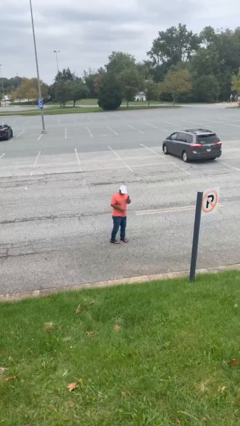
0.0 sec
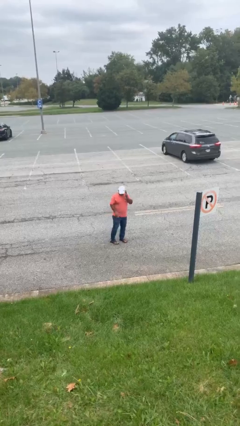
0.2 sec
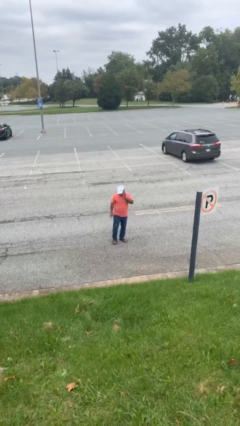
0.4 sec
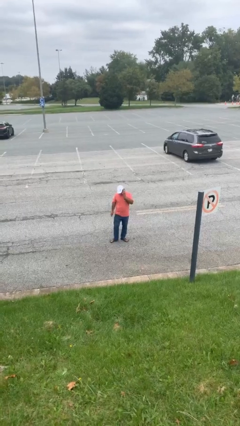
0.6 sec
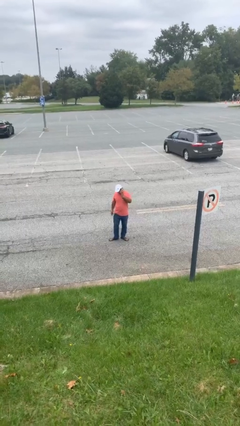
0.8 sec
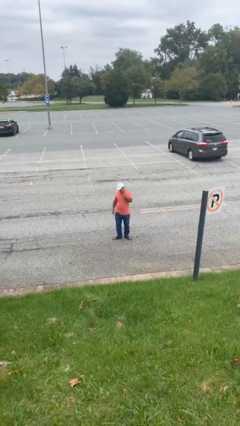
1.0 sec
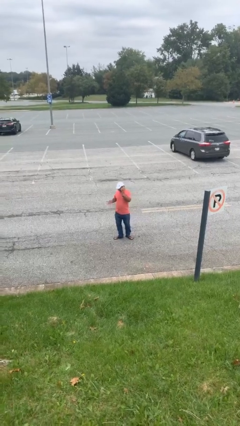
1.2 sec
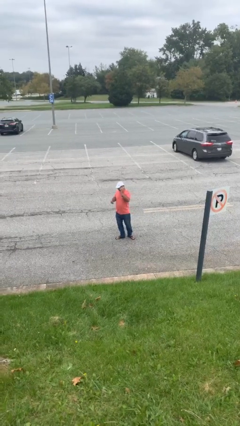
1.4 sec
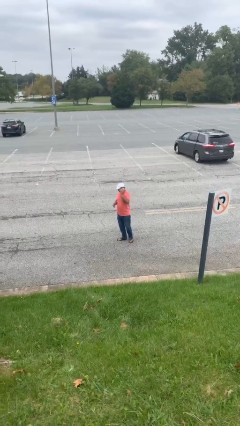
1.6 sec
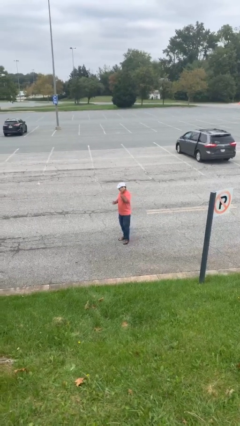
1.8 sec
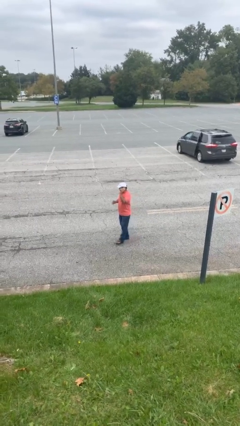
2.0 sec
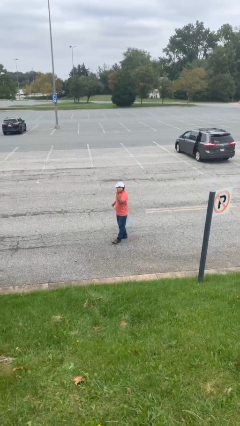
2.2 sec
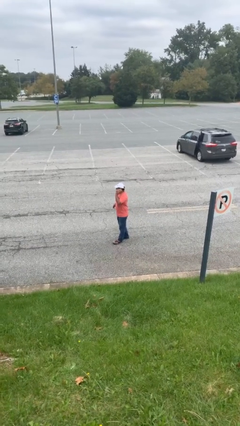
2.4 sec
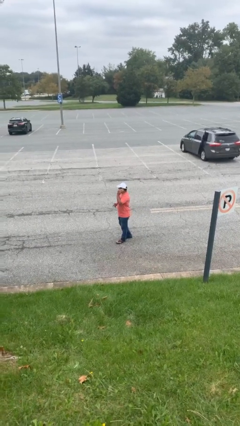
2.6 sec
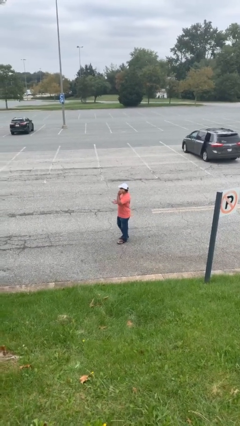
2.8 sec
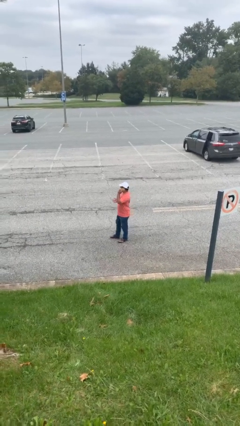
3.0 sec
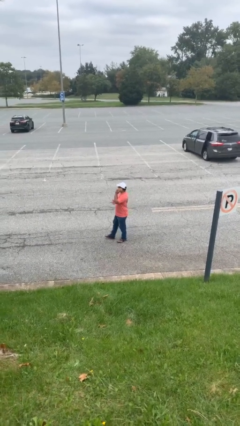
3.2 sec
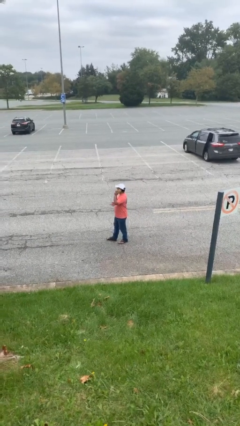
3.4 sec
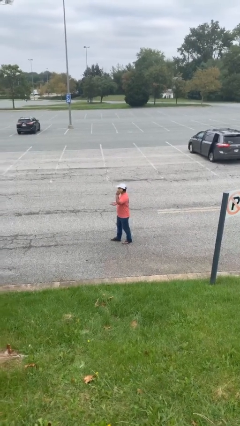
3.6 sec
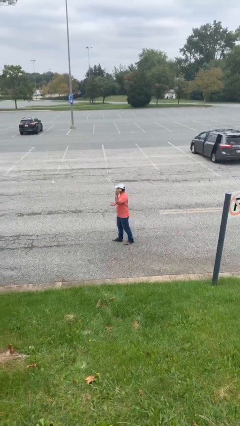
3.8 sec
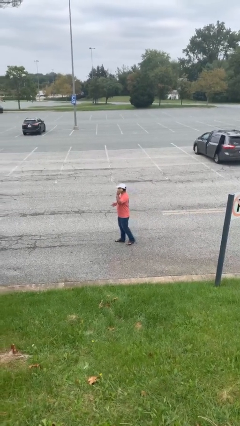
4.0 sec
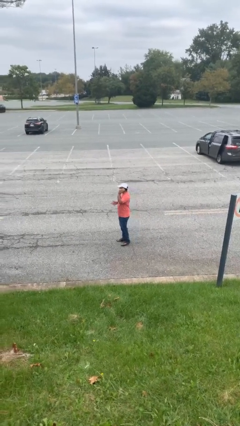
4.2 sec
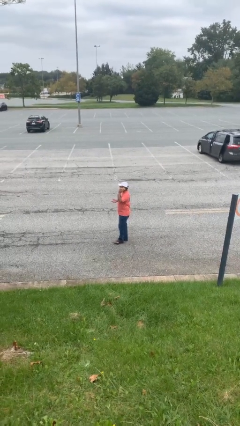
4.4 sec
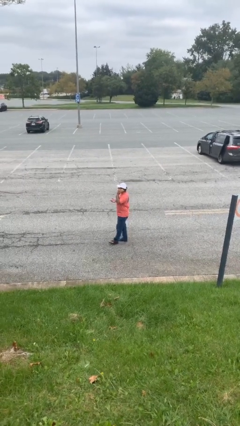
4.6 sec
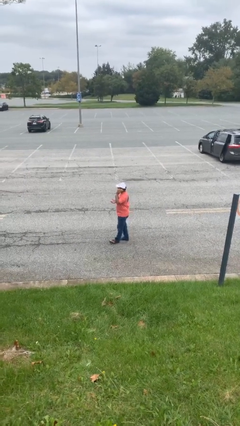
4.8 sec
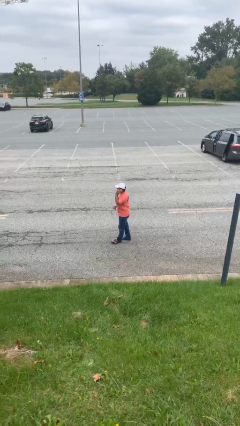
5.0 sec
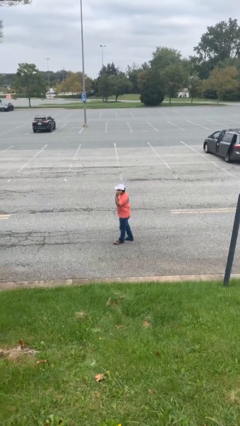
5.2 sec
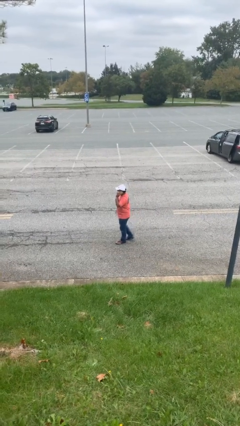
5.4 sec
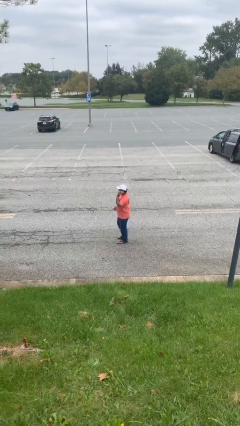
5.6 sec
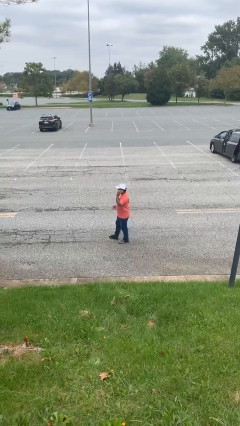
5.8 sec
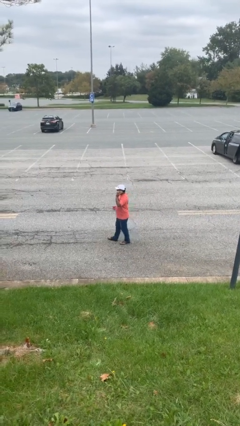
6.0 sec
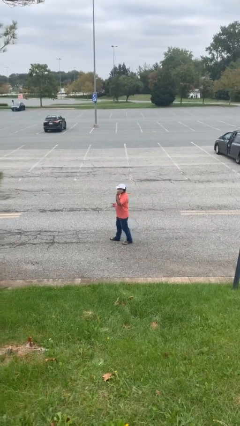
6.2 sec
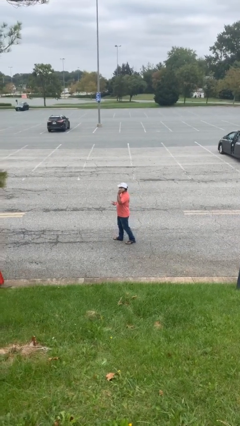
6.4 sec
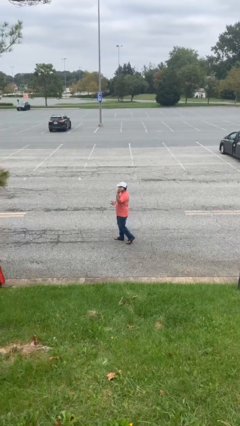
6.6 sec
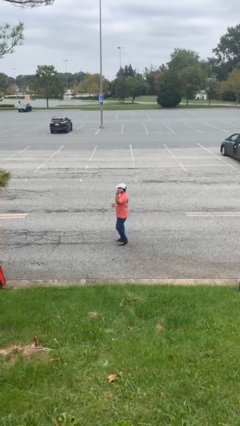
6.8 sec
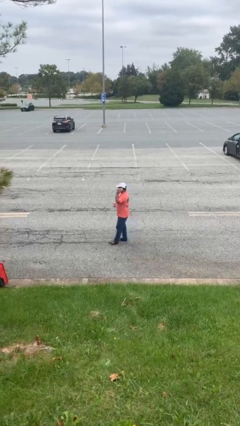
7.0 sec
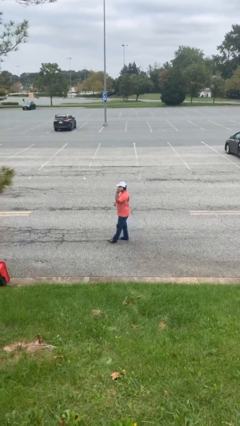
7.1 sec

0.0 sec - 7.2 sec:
person talks on phone

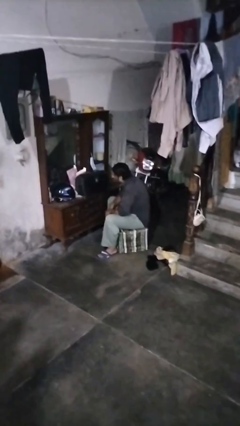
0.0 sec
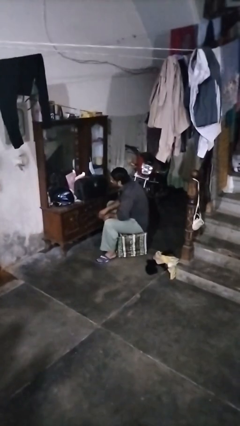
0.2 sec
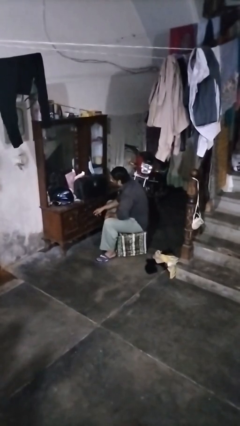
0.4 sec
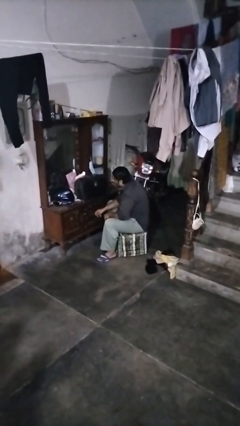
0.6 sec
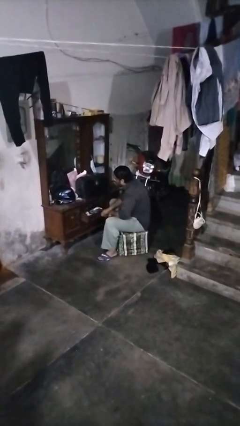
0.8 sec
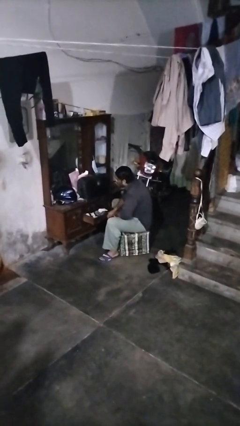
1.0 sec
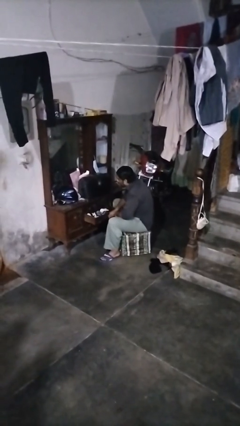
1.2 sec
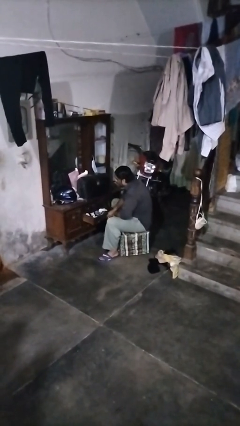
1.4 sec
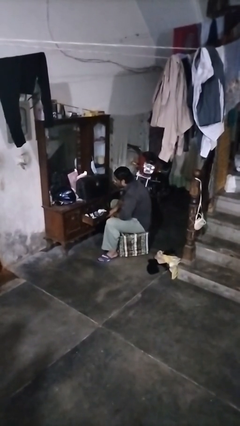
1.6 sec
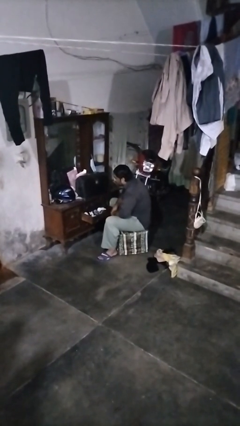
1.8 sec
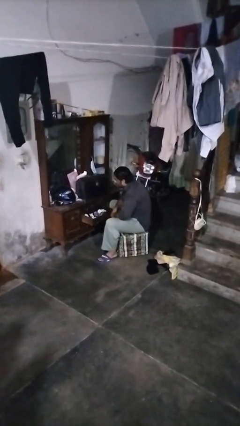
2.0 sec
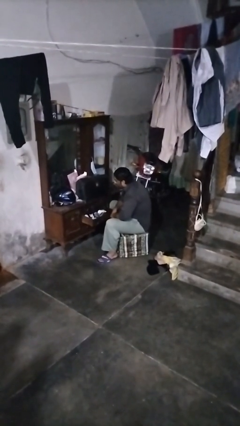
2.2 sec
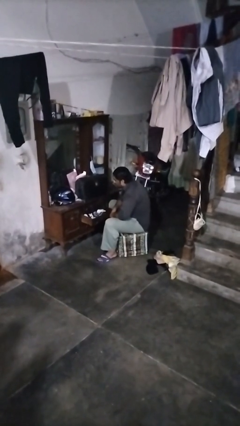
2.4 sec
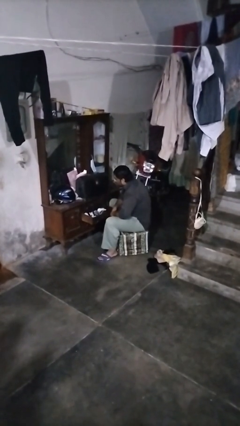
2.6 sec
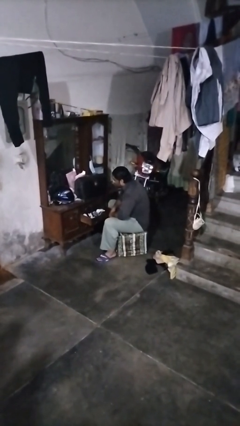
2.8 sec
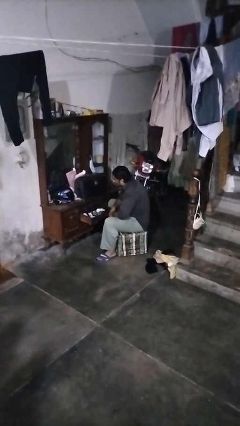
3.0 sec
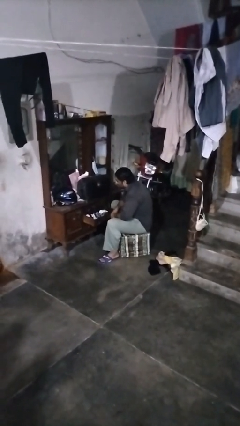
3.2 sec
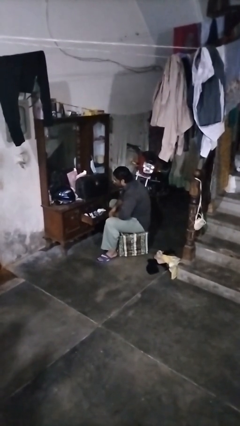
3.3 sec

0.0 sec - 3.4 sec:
person opens dresser drawer

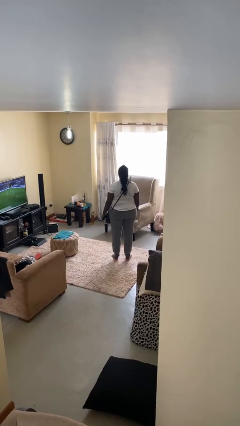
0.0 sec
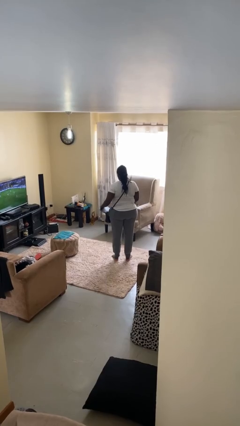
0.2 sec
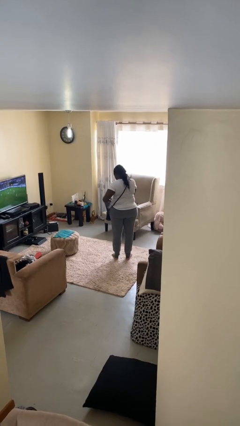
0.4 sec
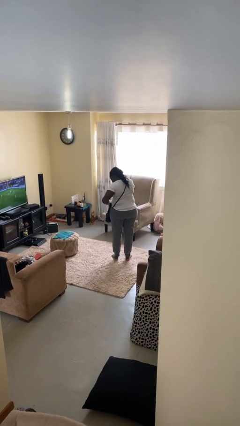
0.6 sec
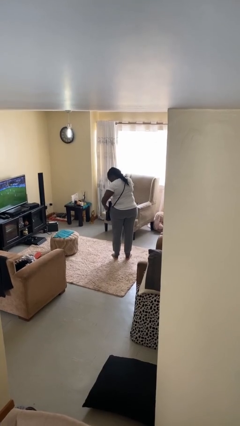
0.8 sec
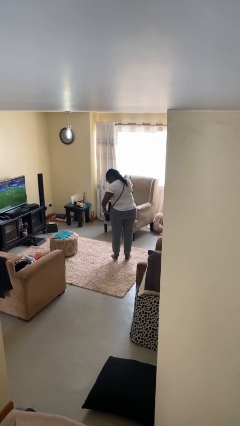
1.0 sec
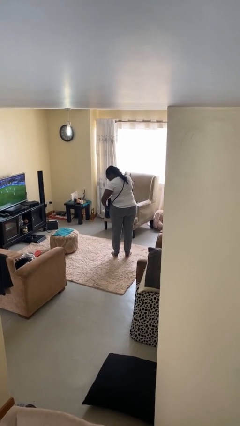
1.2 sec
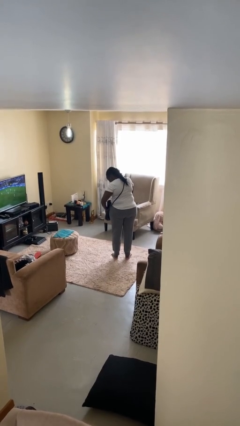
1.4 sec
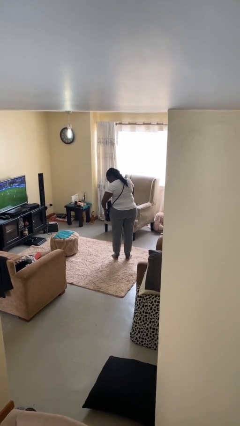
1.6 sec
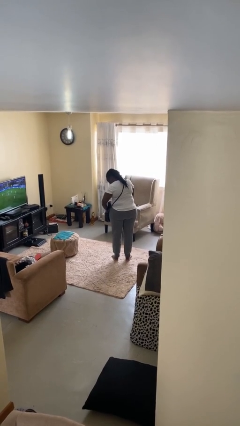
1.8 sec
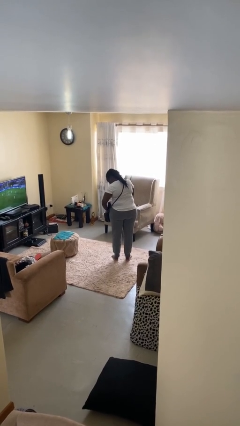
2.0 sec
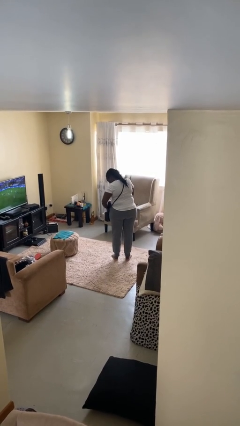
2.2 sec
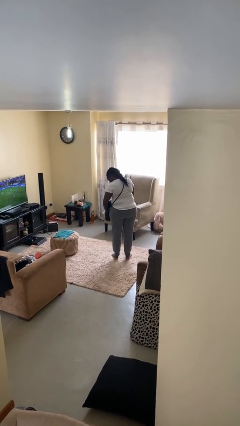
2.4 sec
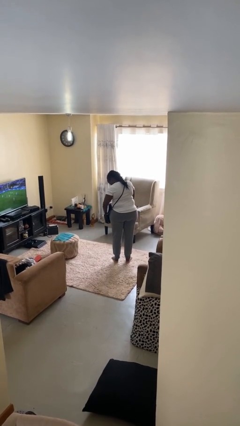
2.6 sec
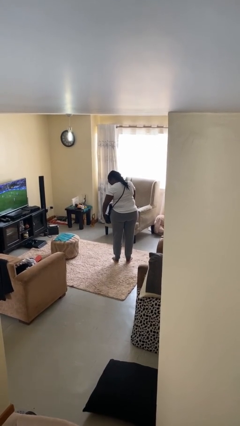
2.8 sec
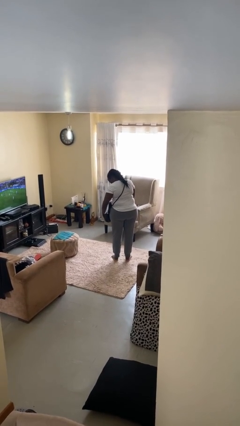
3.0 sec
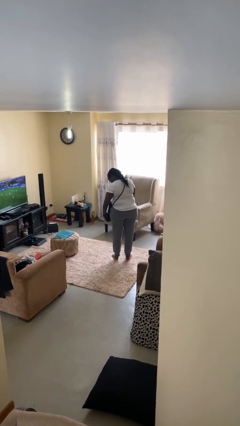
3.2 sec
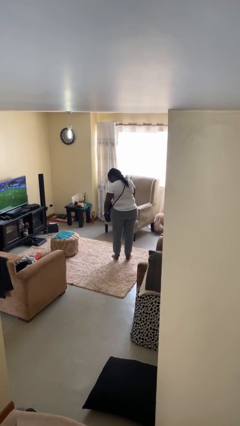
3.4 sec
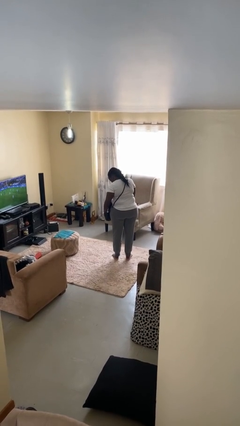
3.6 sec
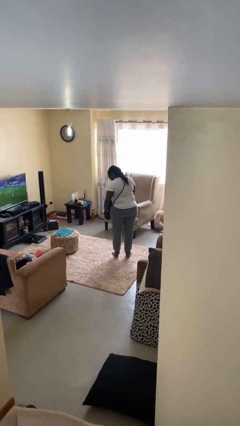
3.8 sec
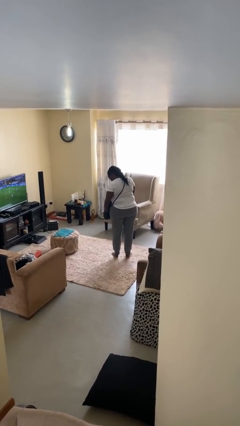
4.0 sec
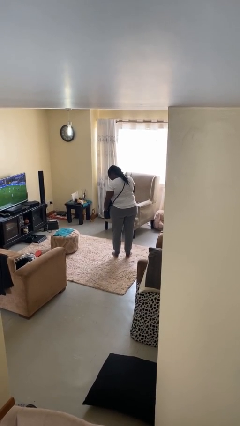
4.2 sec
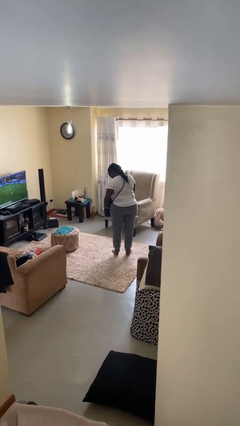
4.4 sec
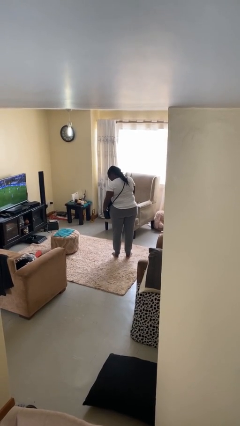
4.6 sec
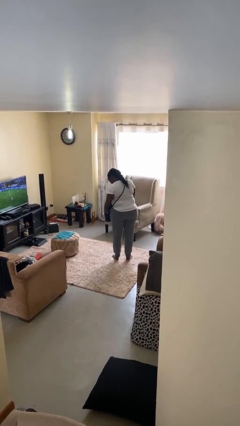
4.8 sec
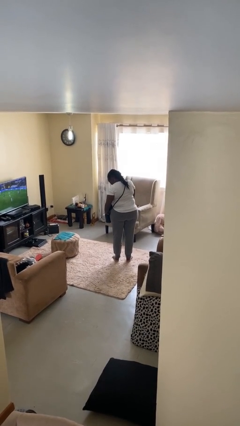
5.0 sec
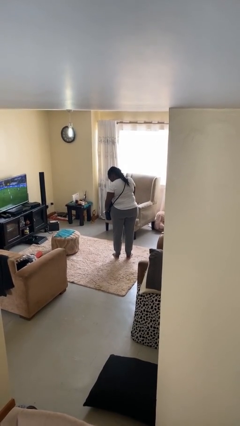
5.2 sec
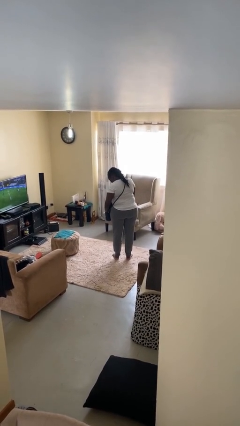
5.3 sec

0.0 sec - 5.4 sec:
person searches in purse

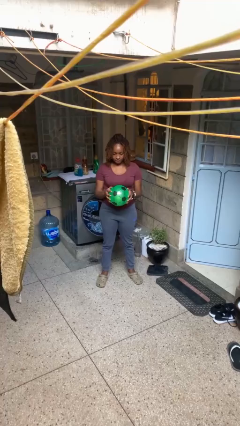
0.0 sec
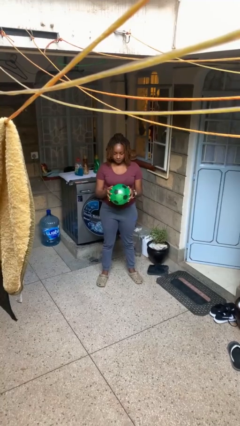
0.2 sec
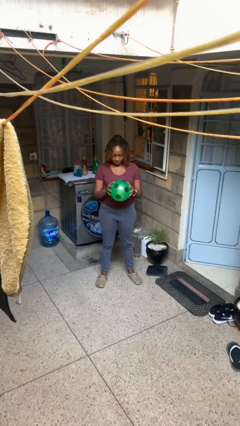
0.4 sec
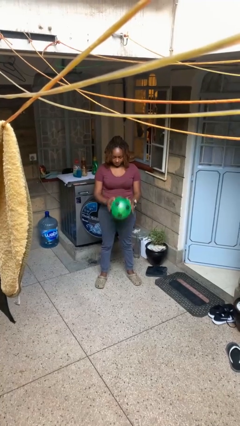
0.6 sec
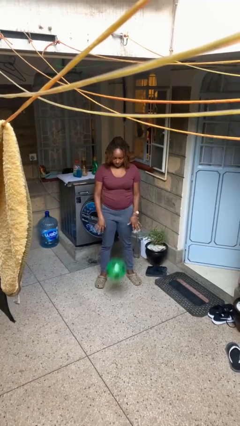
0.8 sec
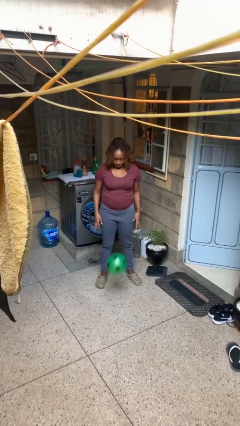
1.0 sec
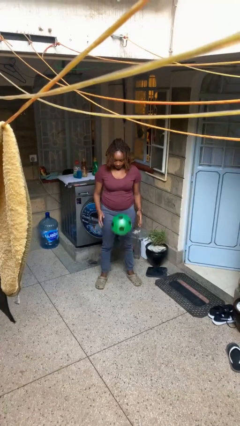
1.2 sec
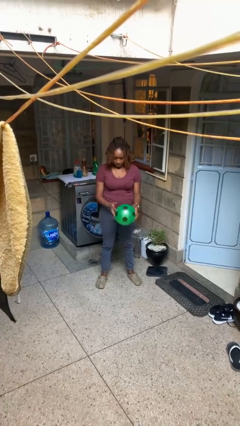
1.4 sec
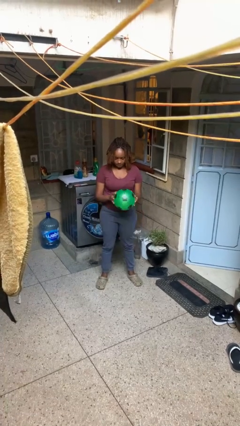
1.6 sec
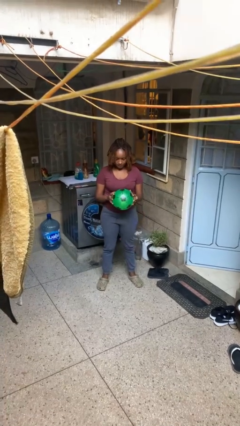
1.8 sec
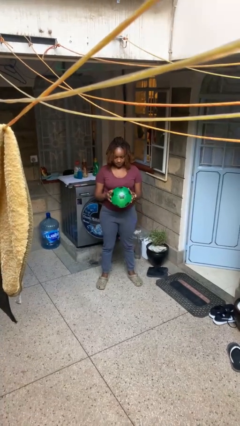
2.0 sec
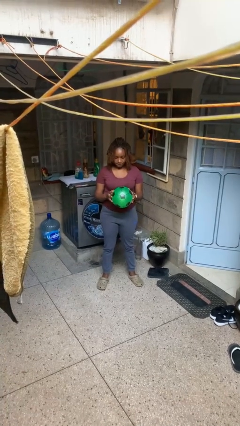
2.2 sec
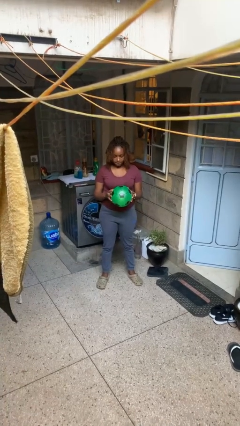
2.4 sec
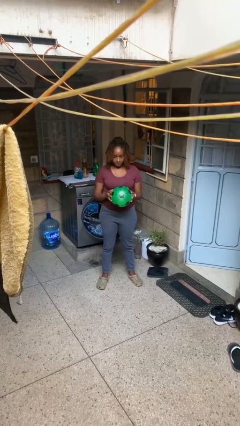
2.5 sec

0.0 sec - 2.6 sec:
person bounces ball on floor
